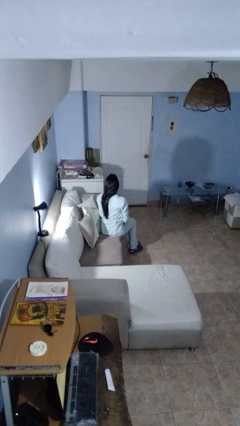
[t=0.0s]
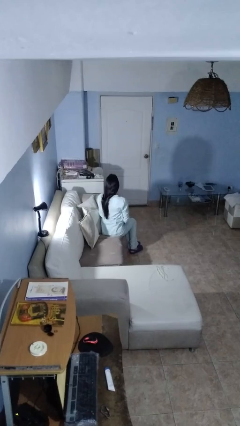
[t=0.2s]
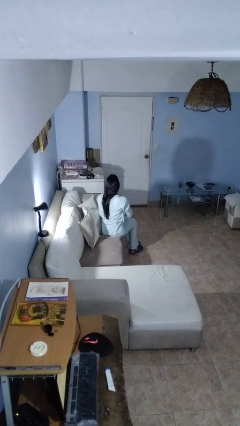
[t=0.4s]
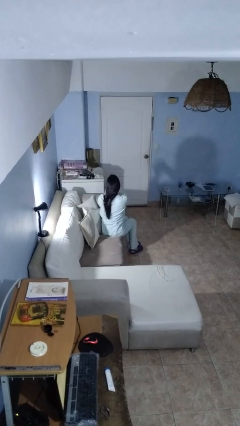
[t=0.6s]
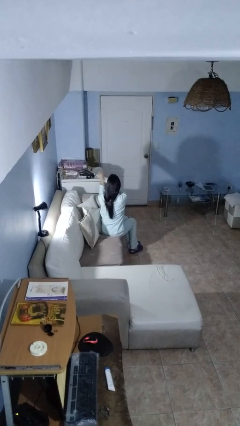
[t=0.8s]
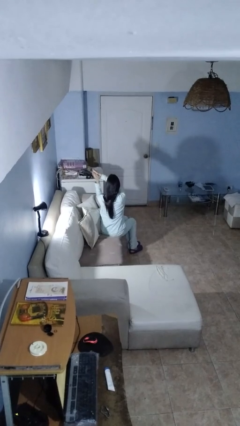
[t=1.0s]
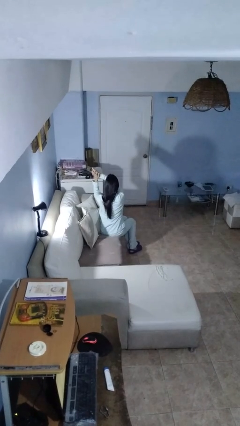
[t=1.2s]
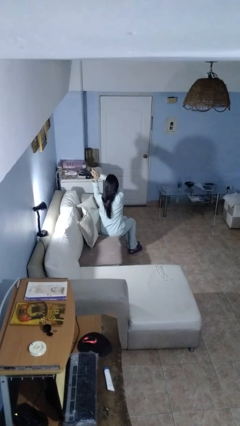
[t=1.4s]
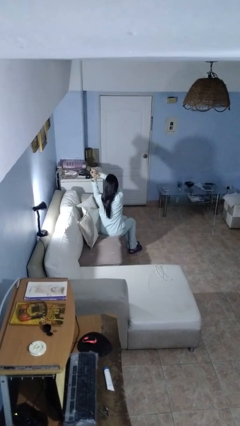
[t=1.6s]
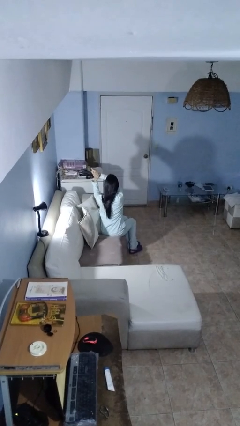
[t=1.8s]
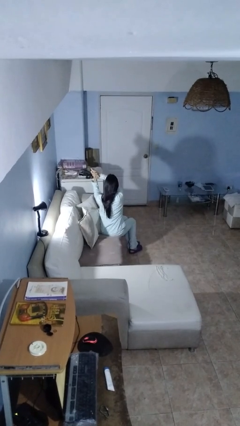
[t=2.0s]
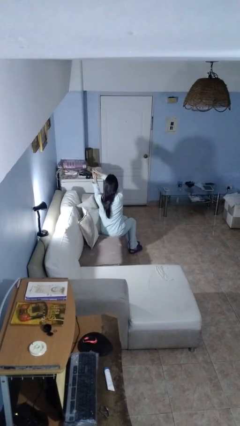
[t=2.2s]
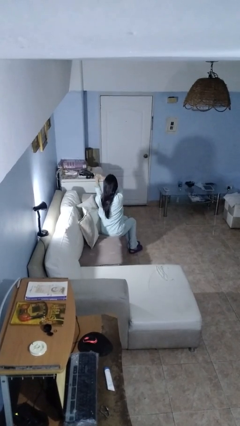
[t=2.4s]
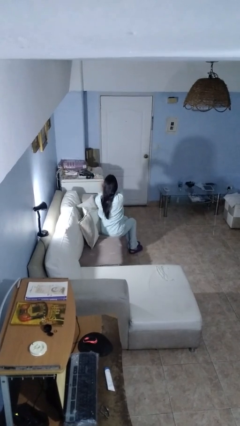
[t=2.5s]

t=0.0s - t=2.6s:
person snaps fingers

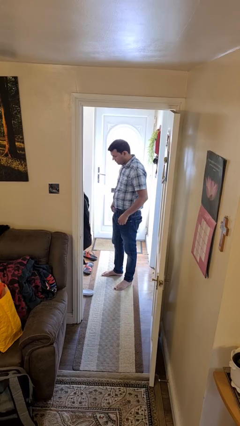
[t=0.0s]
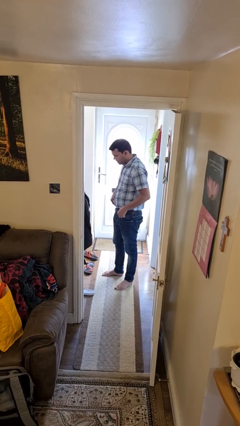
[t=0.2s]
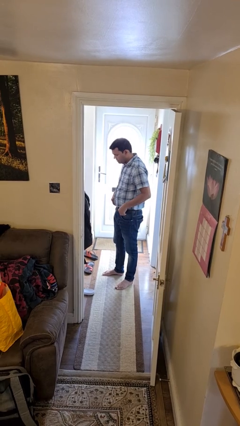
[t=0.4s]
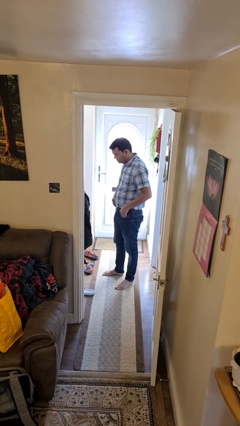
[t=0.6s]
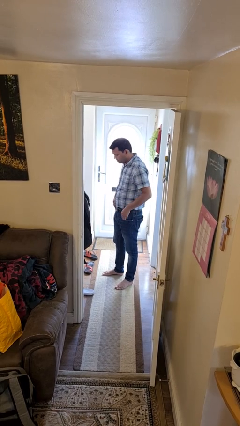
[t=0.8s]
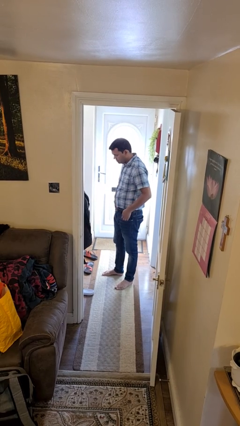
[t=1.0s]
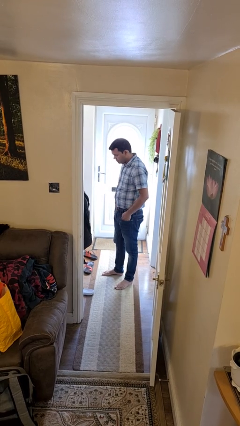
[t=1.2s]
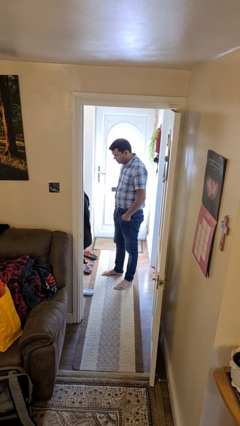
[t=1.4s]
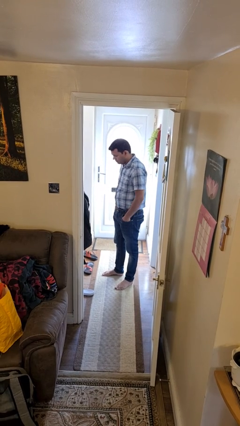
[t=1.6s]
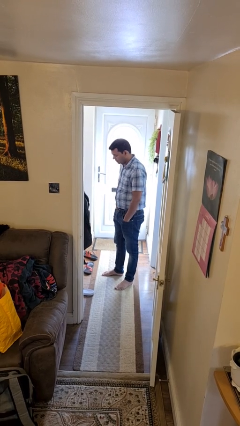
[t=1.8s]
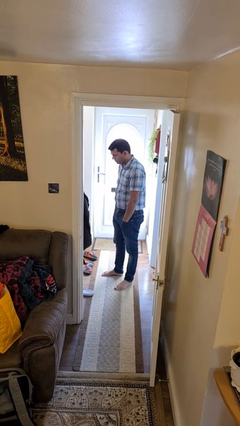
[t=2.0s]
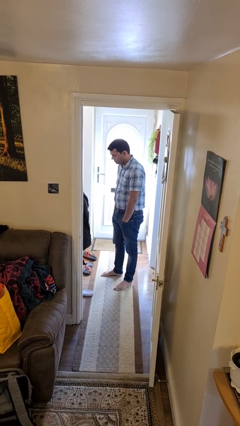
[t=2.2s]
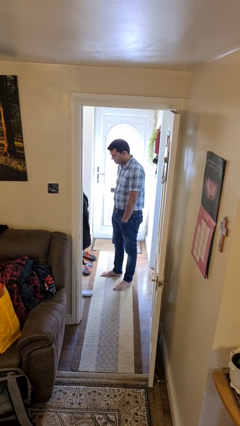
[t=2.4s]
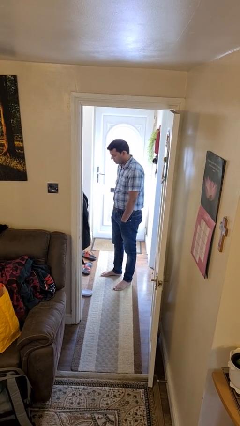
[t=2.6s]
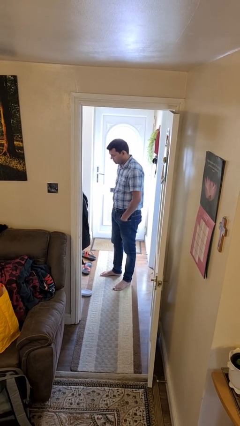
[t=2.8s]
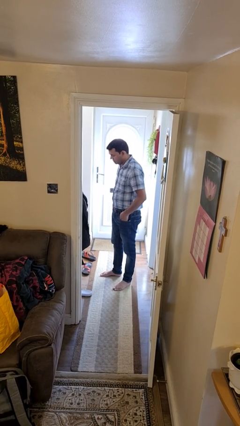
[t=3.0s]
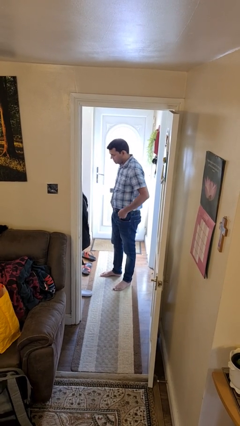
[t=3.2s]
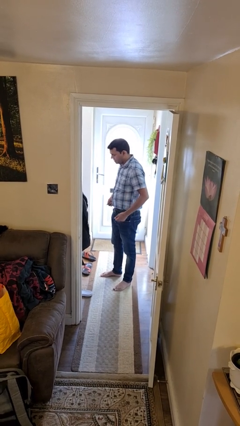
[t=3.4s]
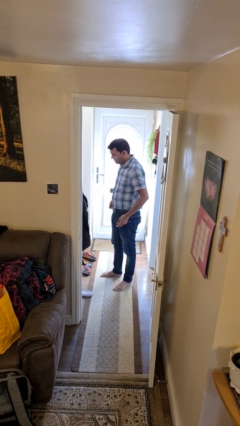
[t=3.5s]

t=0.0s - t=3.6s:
person puts hands in back pockets

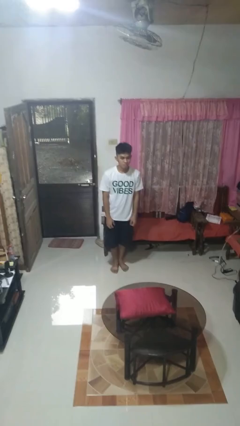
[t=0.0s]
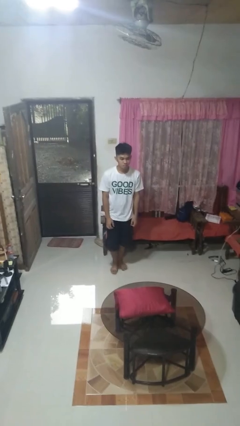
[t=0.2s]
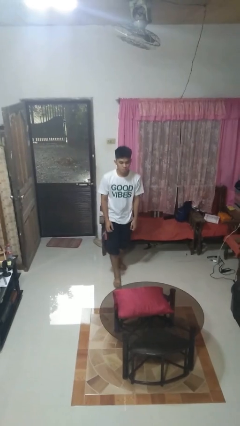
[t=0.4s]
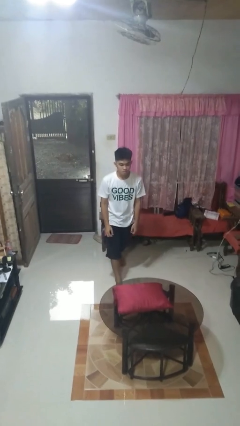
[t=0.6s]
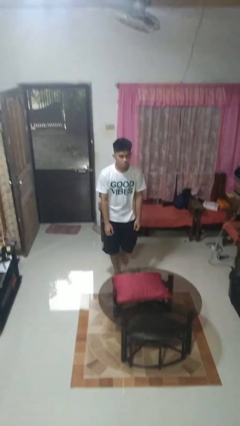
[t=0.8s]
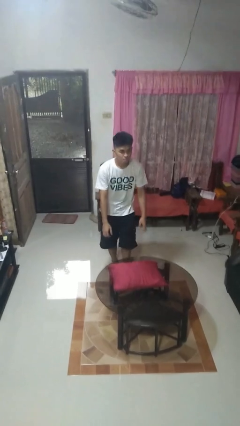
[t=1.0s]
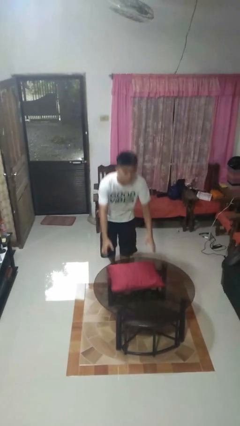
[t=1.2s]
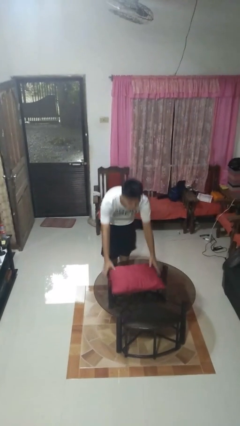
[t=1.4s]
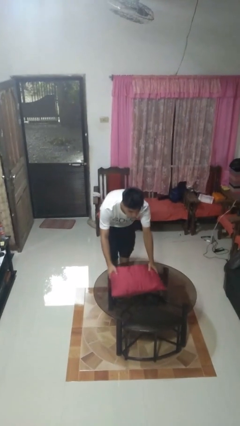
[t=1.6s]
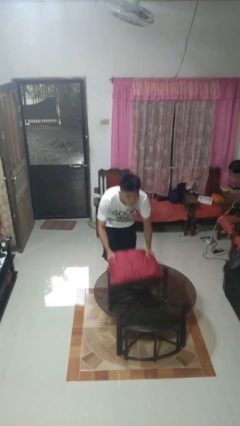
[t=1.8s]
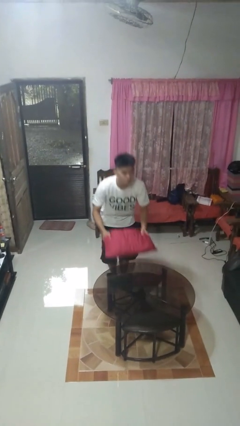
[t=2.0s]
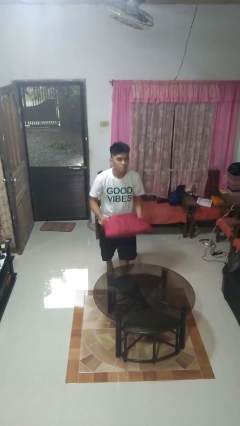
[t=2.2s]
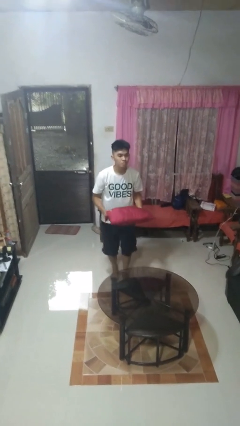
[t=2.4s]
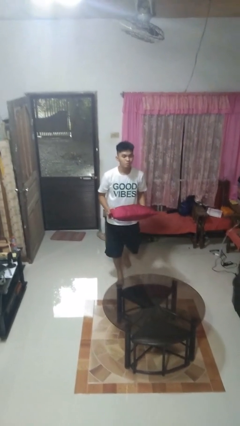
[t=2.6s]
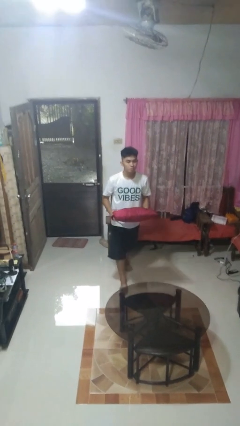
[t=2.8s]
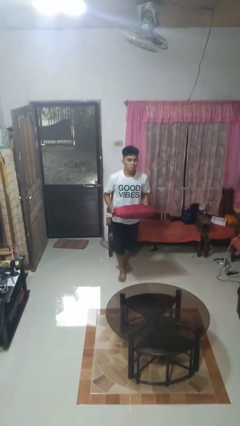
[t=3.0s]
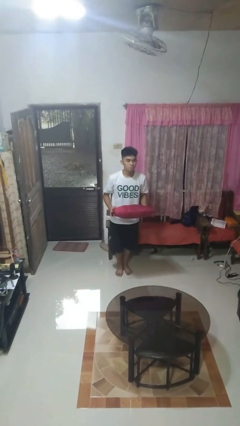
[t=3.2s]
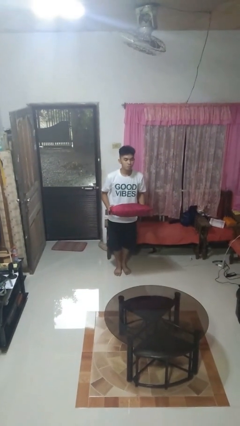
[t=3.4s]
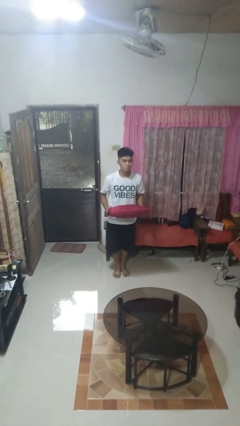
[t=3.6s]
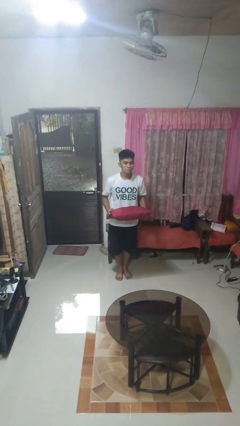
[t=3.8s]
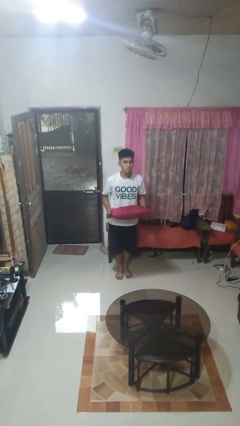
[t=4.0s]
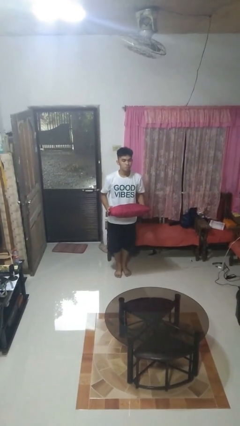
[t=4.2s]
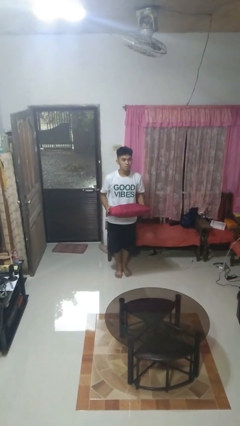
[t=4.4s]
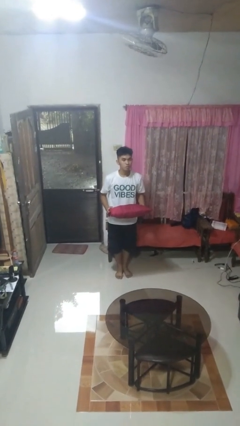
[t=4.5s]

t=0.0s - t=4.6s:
person picks up object from table

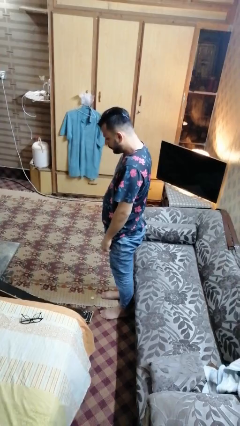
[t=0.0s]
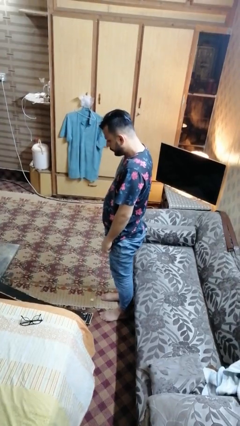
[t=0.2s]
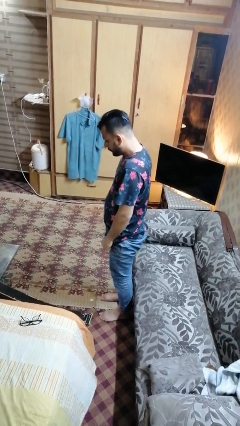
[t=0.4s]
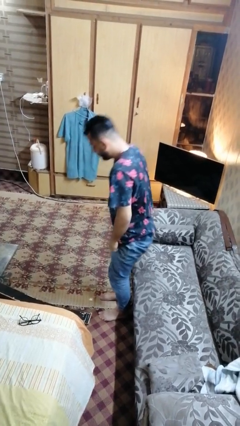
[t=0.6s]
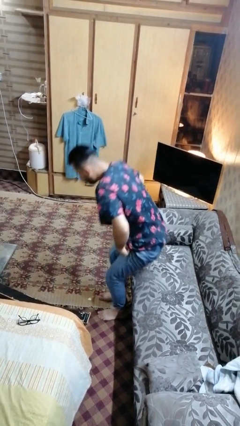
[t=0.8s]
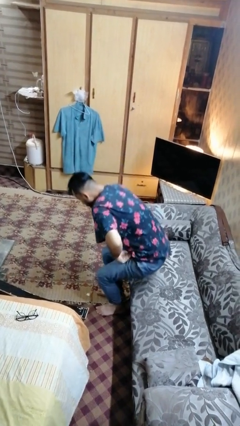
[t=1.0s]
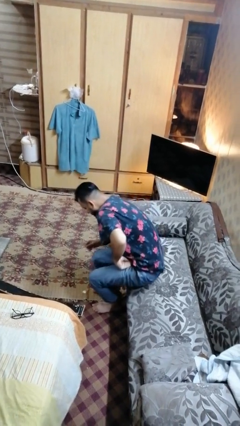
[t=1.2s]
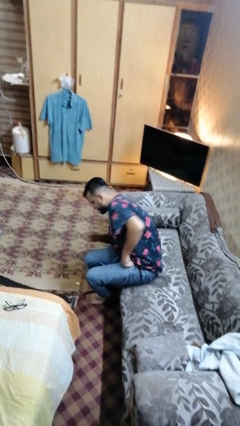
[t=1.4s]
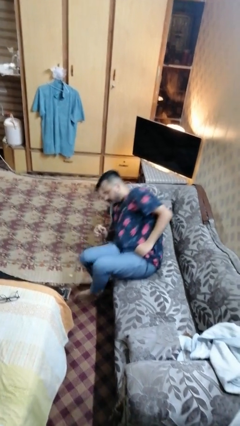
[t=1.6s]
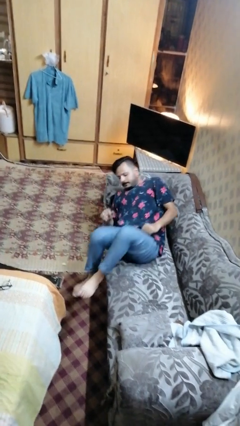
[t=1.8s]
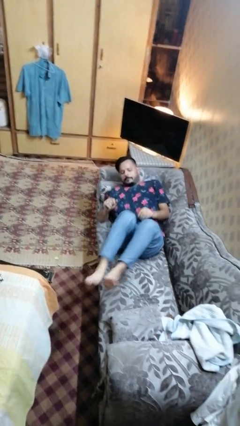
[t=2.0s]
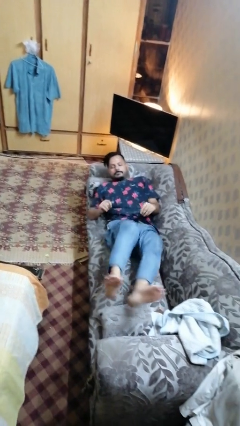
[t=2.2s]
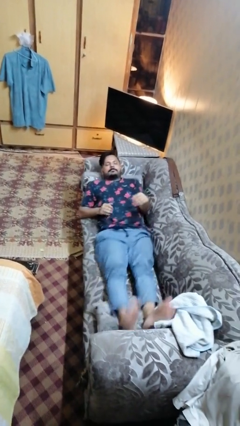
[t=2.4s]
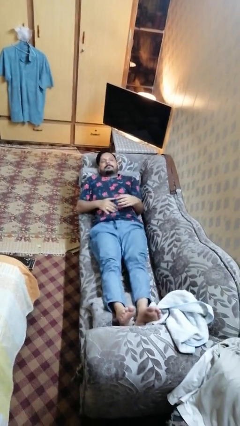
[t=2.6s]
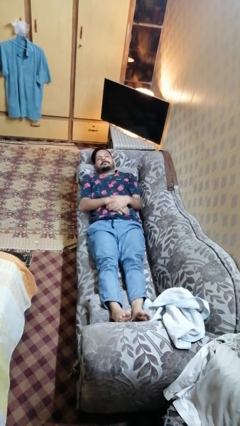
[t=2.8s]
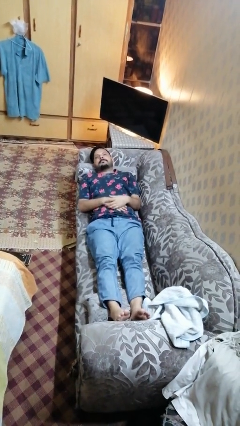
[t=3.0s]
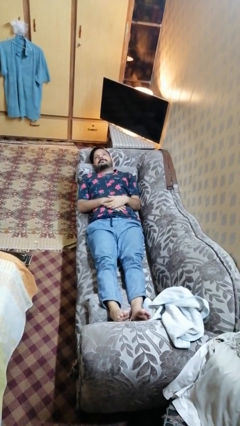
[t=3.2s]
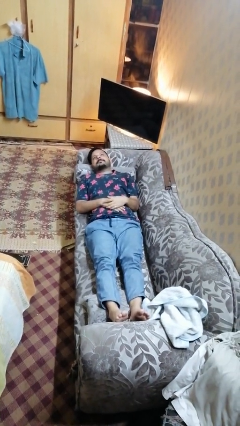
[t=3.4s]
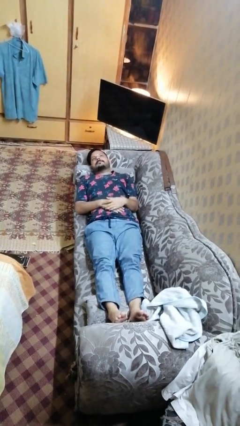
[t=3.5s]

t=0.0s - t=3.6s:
person lies down on couch

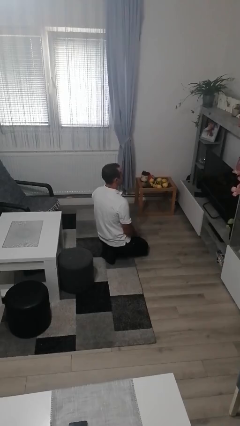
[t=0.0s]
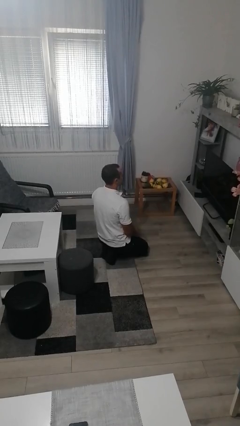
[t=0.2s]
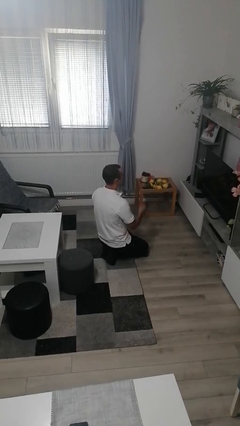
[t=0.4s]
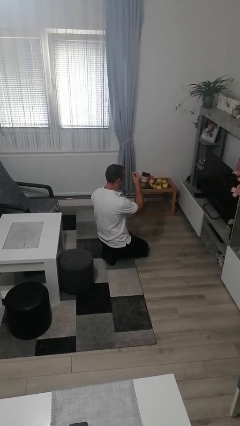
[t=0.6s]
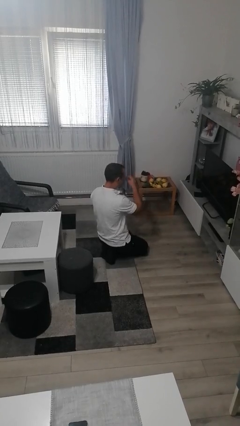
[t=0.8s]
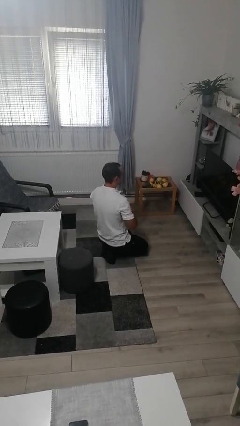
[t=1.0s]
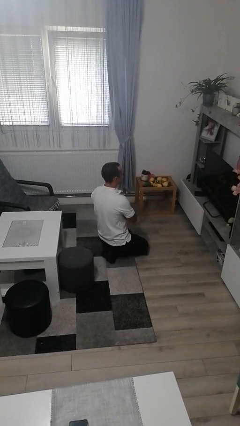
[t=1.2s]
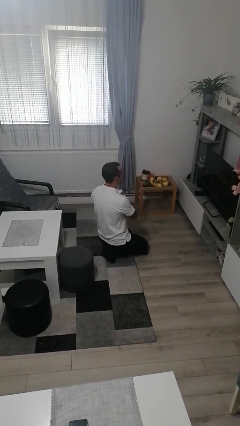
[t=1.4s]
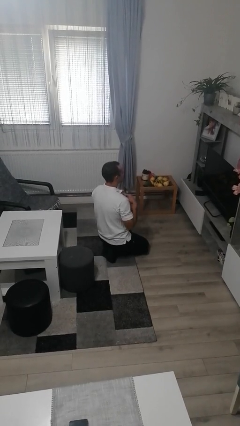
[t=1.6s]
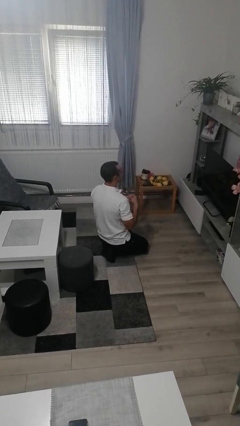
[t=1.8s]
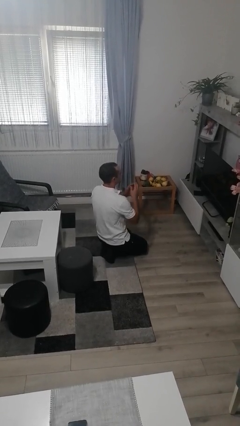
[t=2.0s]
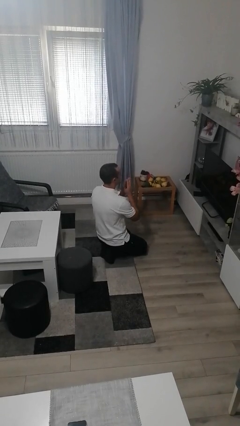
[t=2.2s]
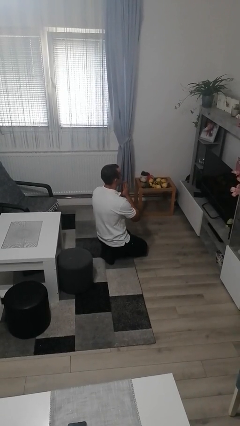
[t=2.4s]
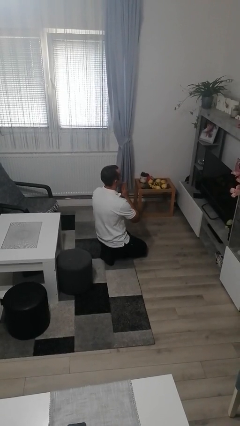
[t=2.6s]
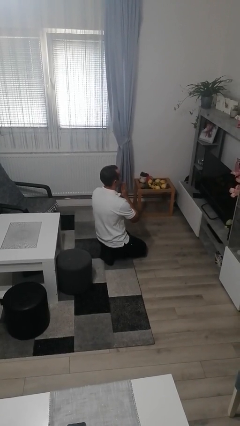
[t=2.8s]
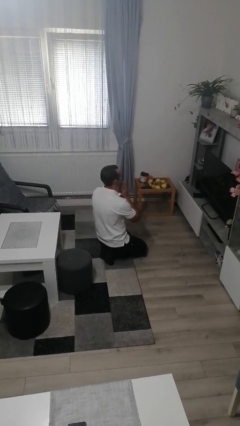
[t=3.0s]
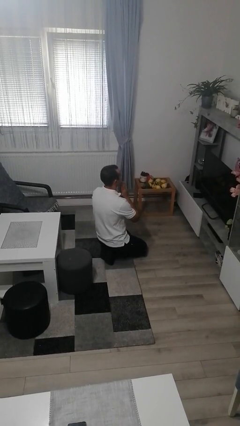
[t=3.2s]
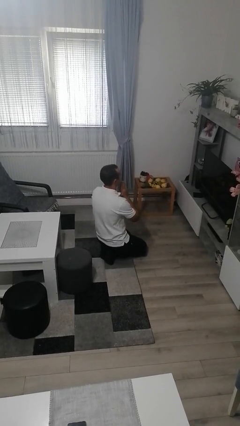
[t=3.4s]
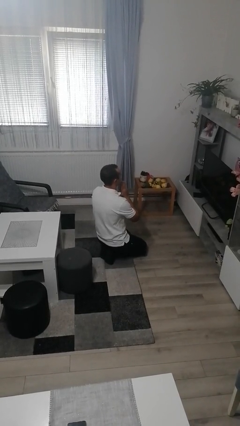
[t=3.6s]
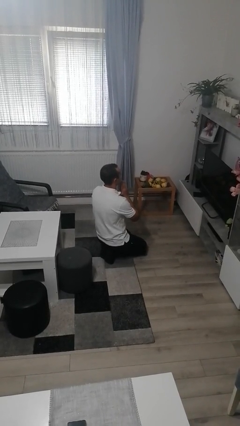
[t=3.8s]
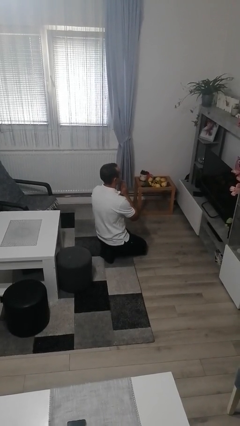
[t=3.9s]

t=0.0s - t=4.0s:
person prays
